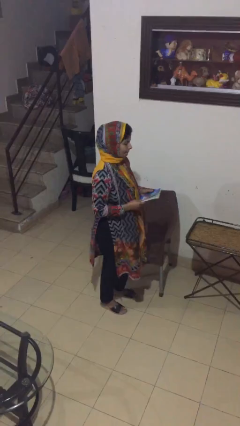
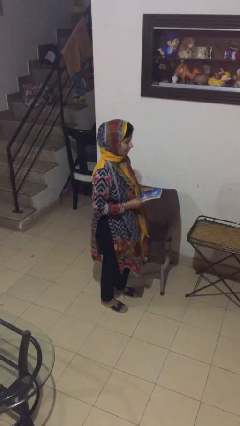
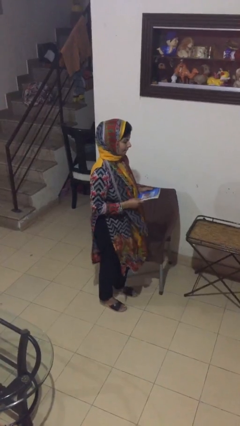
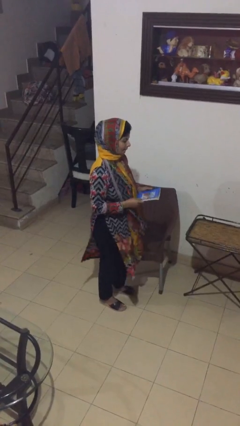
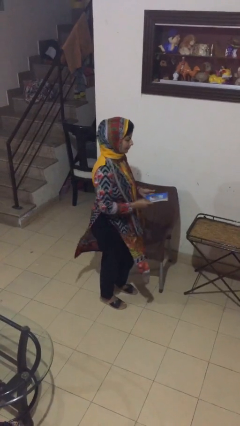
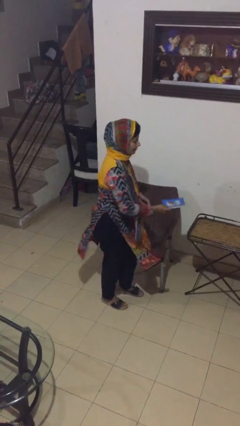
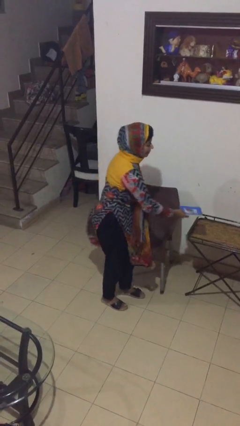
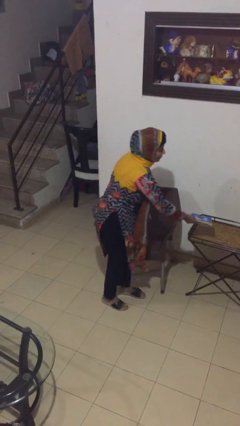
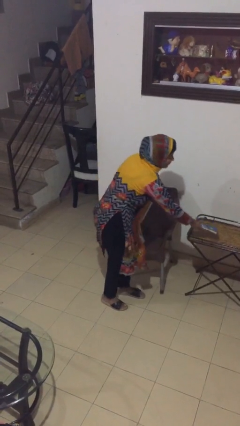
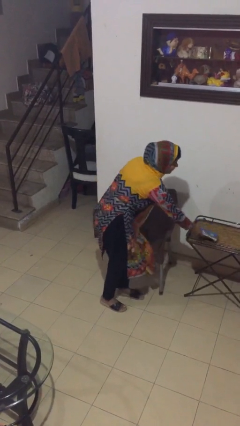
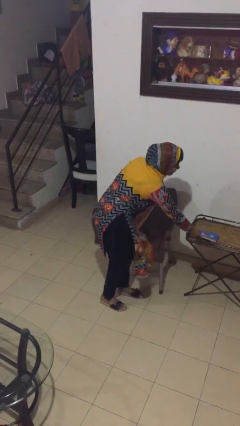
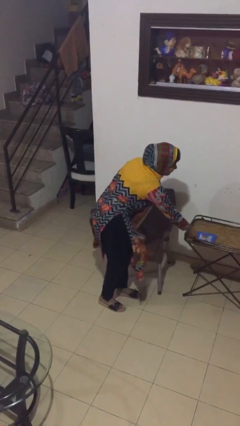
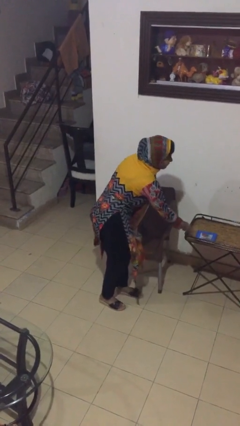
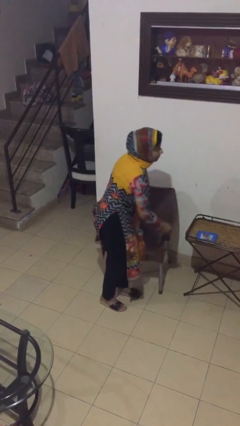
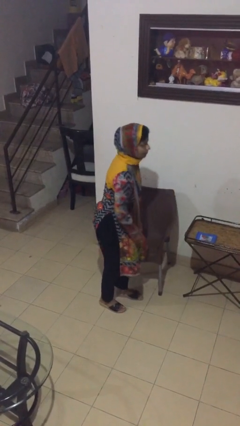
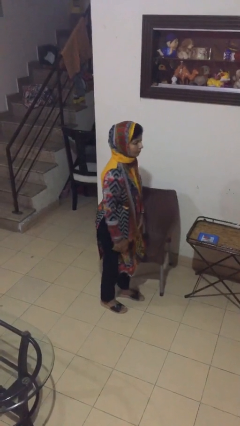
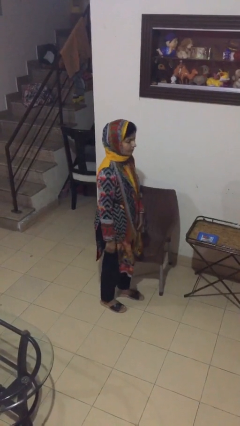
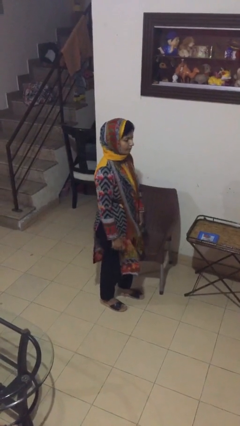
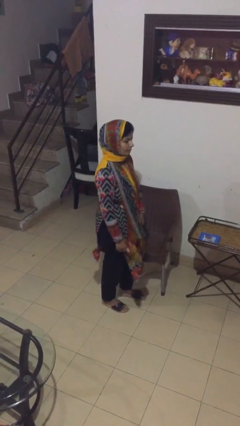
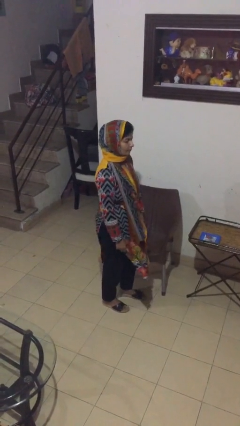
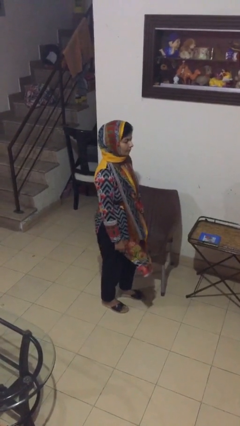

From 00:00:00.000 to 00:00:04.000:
person puts down object on table

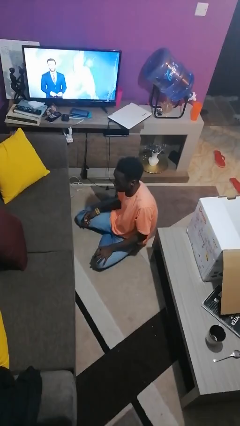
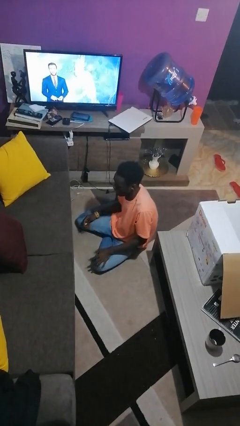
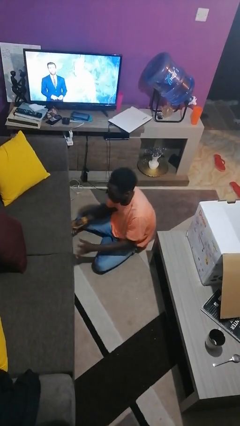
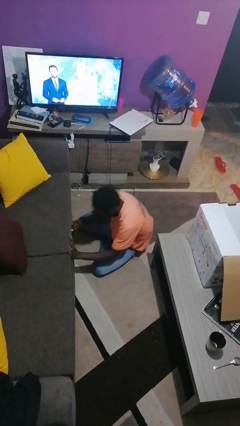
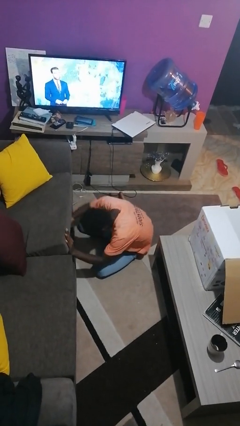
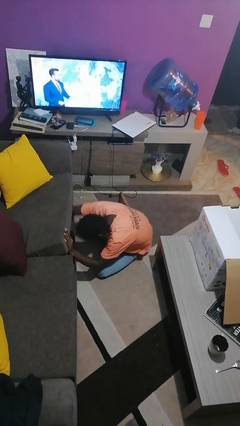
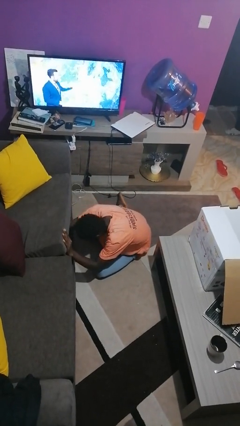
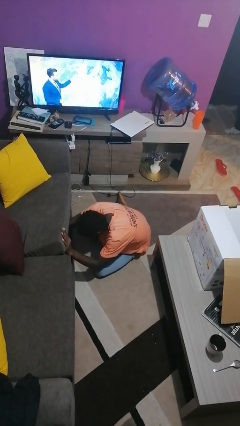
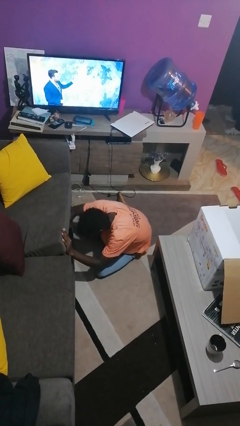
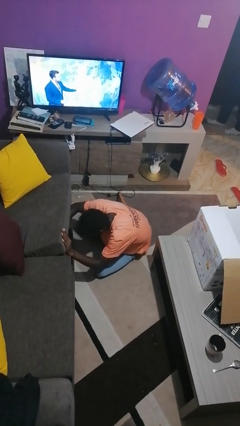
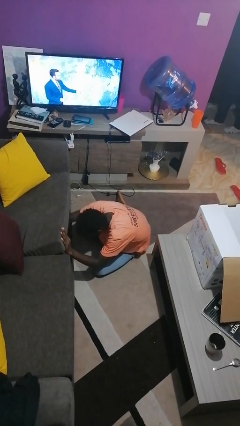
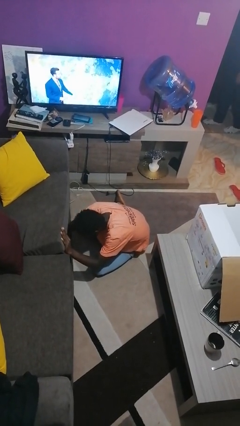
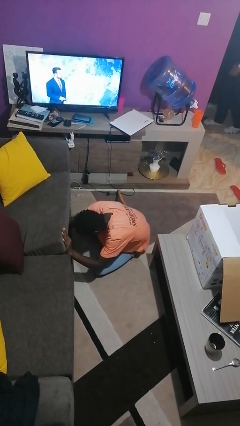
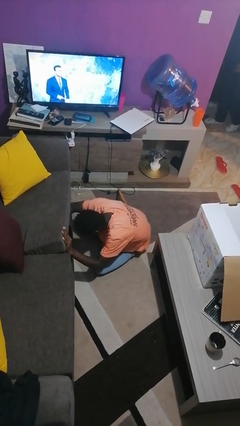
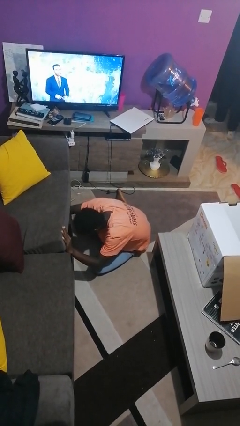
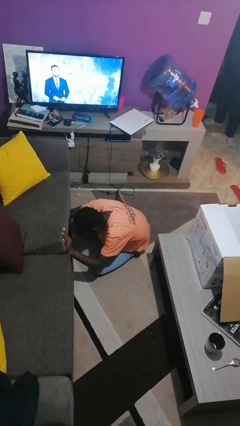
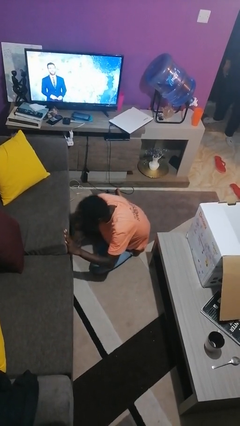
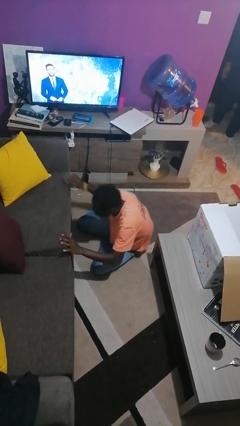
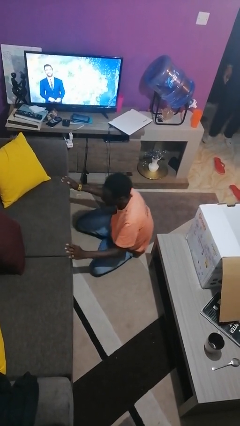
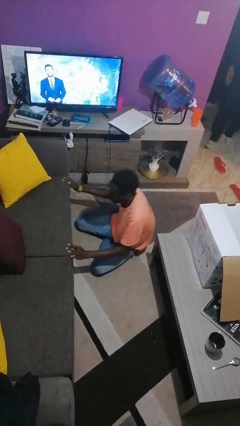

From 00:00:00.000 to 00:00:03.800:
person searches under couch

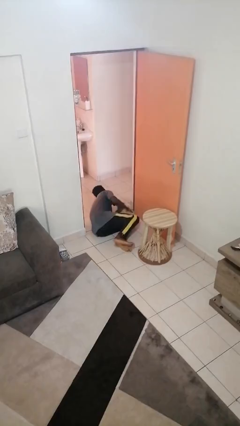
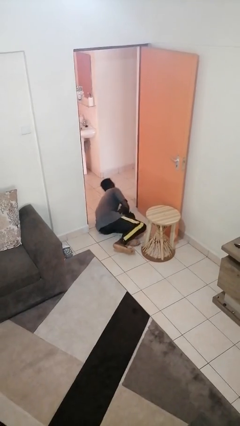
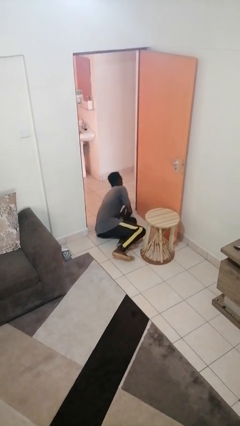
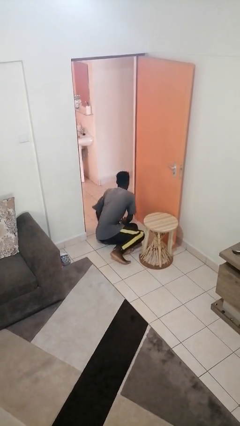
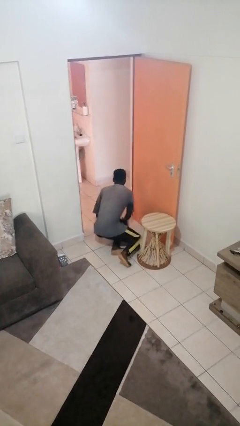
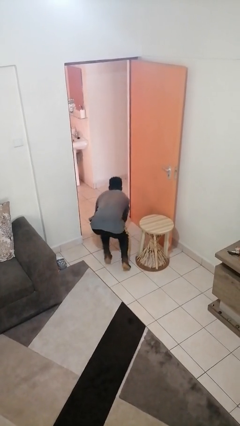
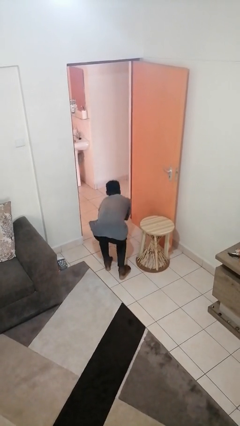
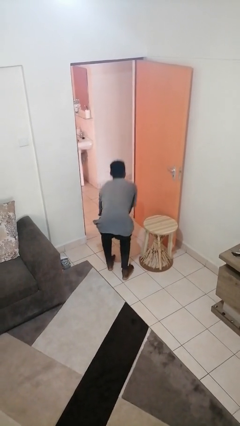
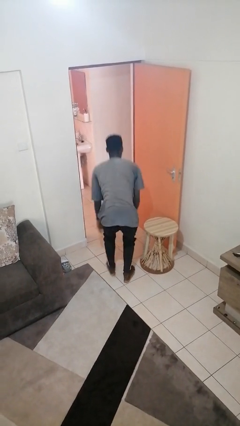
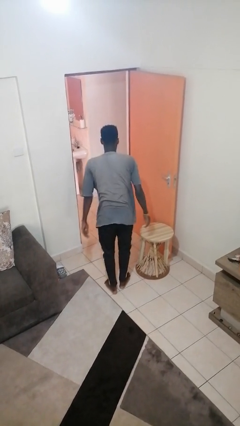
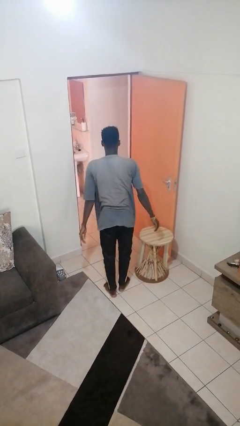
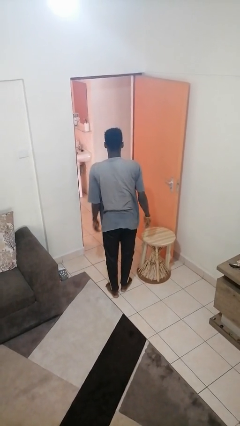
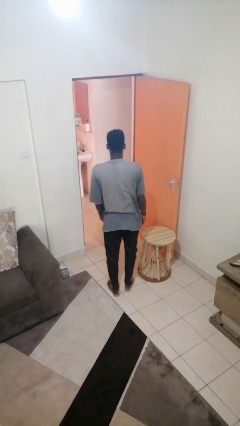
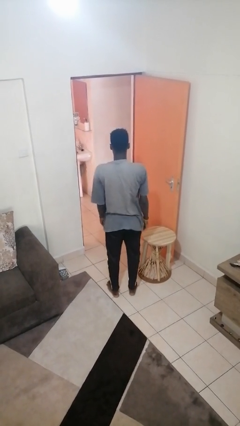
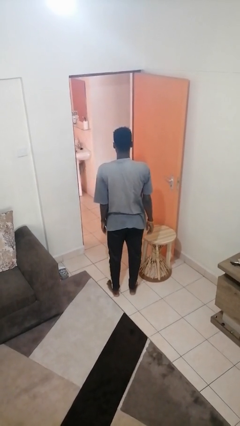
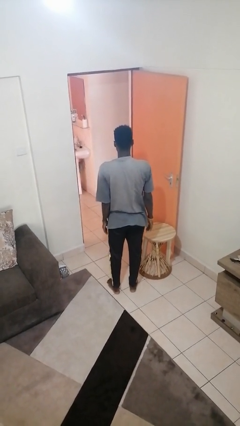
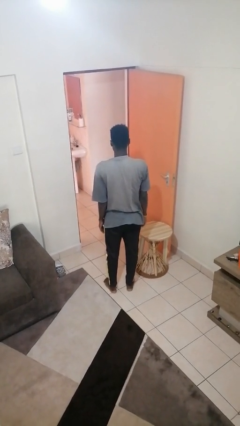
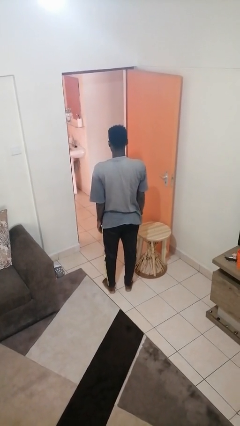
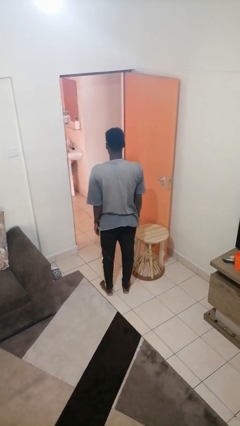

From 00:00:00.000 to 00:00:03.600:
person stands up from floor

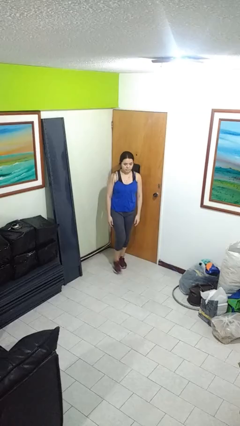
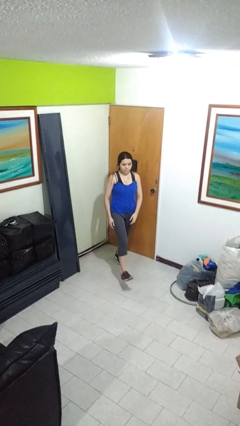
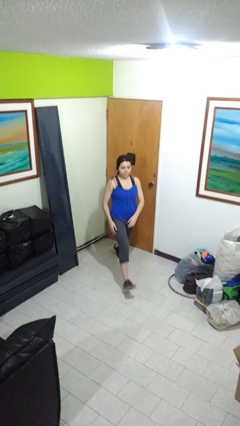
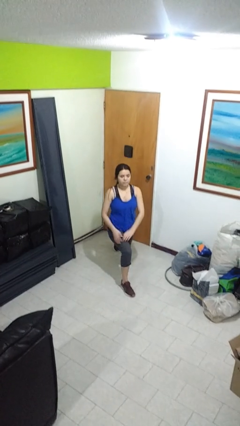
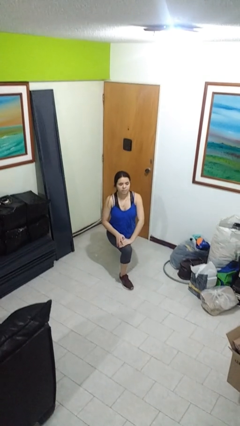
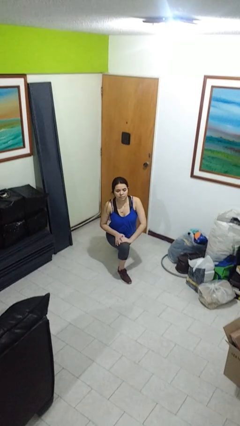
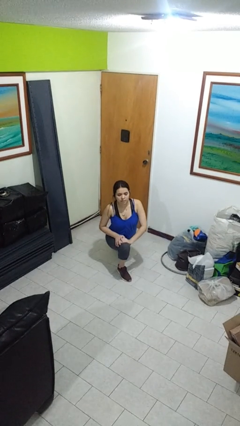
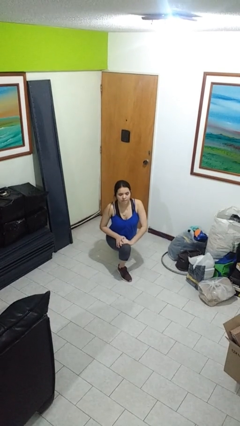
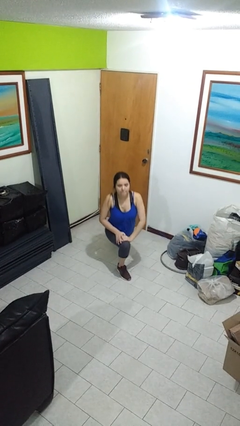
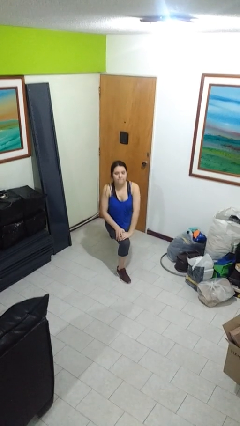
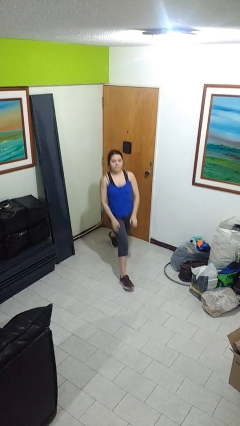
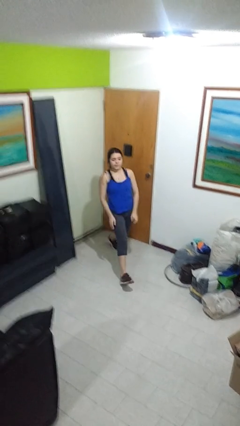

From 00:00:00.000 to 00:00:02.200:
person exercises with lunges

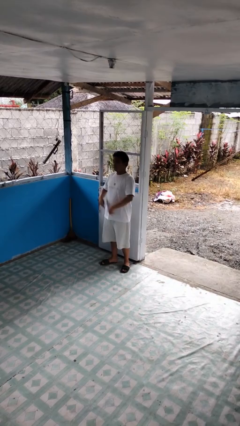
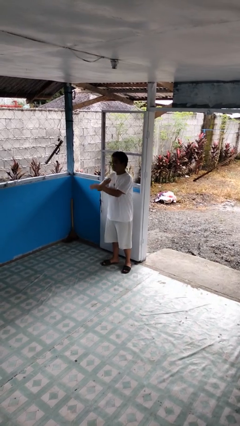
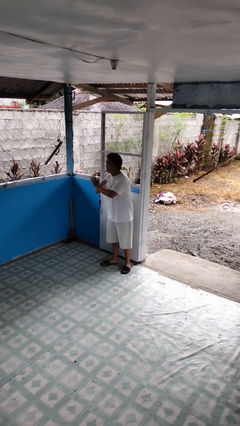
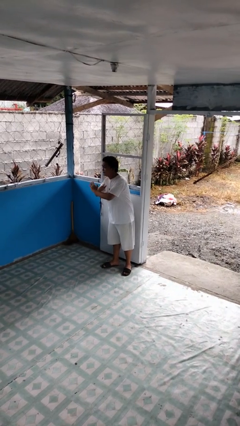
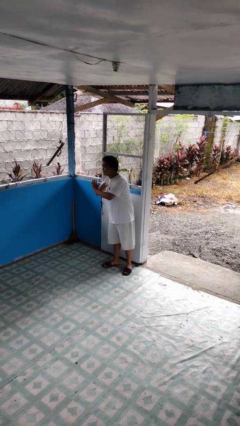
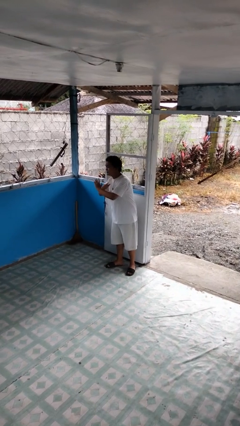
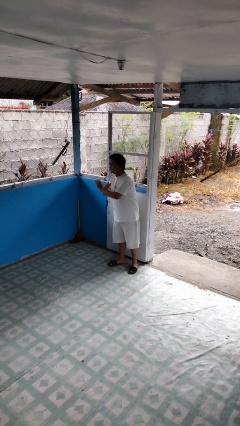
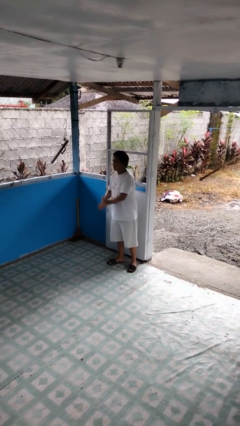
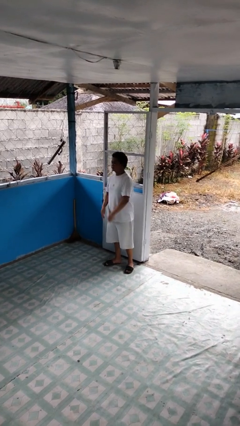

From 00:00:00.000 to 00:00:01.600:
person gestures arms x

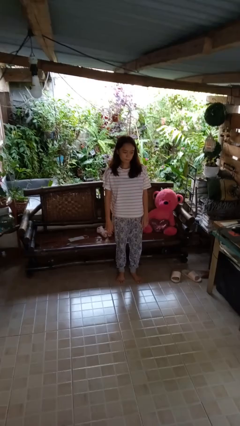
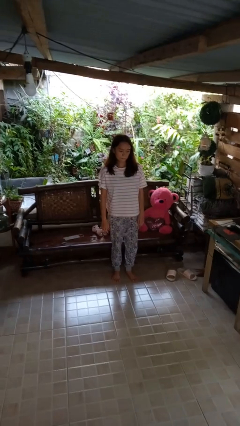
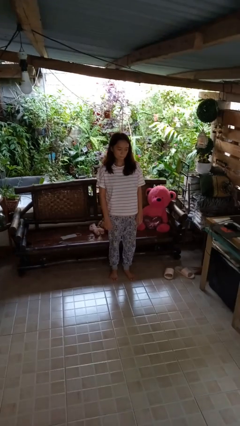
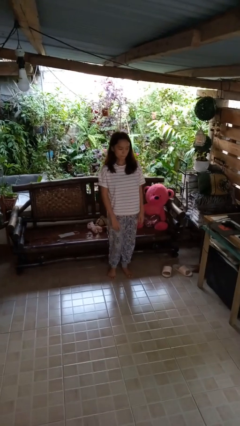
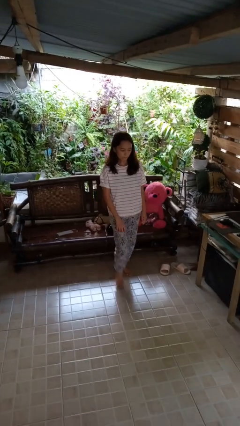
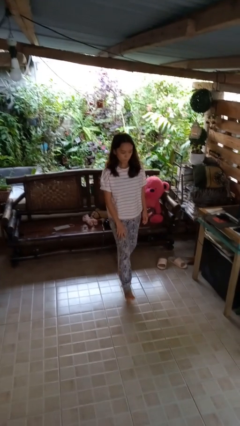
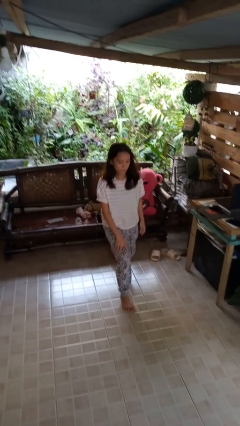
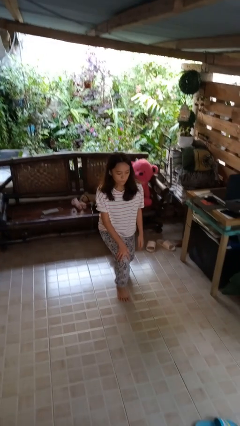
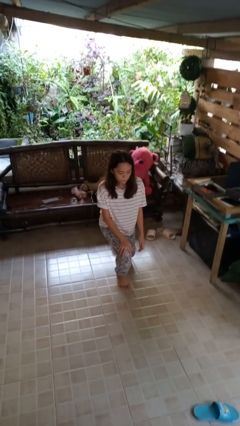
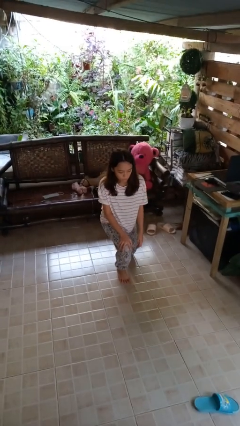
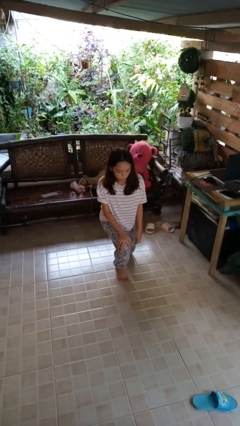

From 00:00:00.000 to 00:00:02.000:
person kneels
